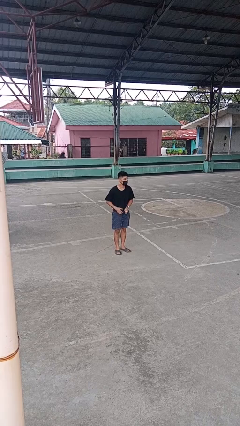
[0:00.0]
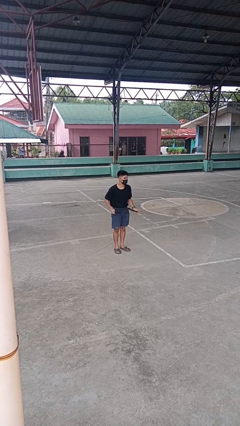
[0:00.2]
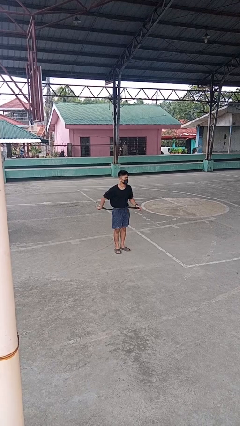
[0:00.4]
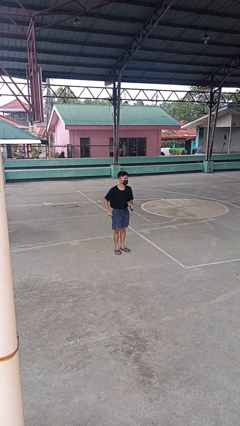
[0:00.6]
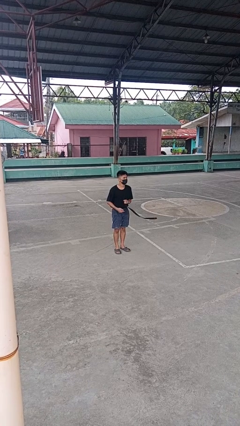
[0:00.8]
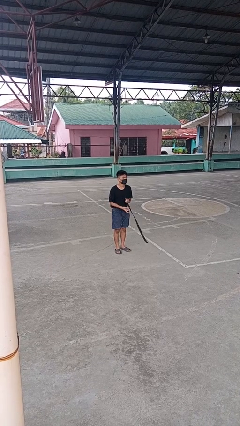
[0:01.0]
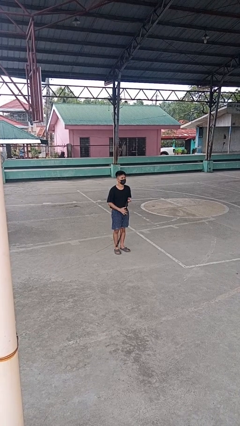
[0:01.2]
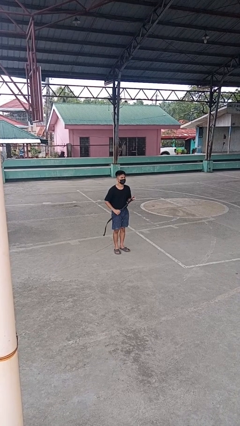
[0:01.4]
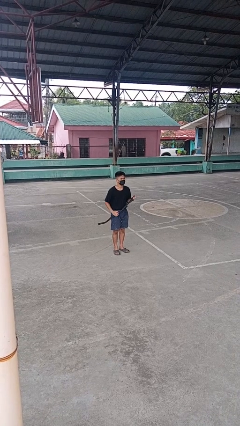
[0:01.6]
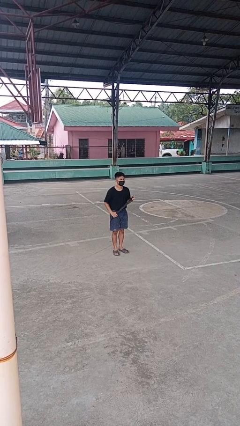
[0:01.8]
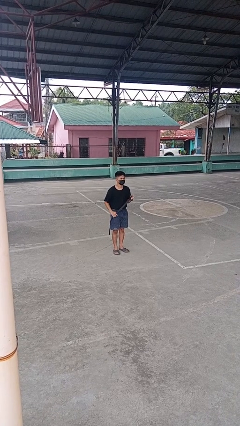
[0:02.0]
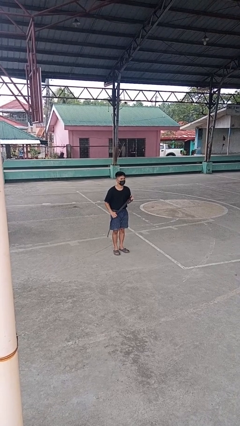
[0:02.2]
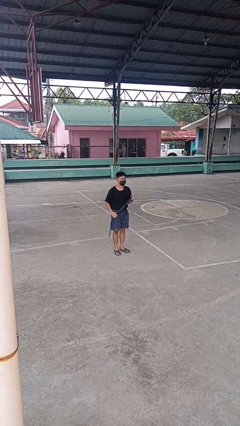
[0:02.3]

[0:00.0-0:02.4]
person takes off belt

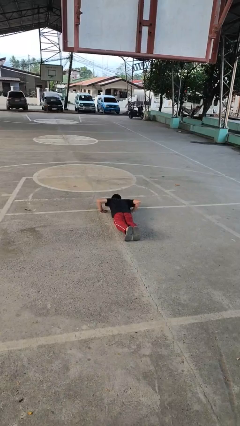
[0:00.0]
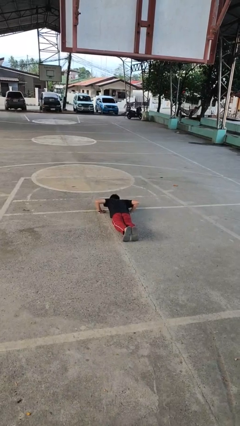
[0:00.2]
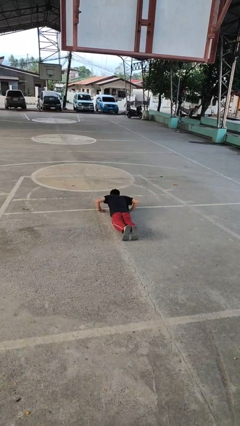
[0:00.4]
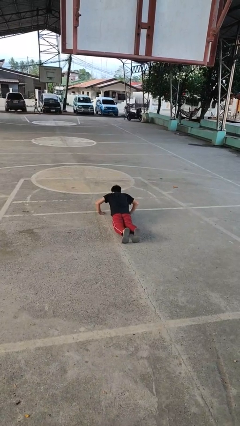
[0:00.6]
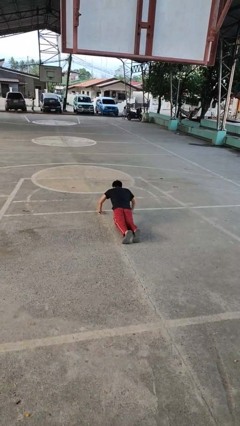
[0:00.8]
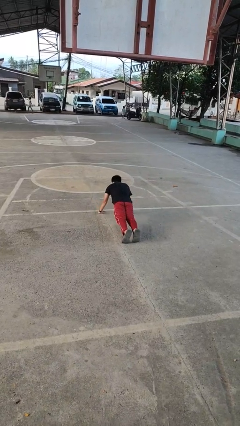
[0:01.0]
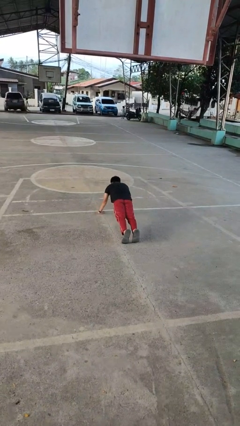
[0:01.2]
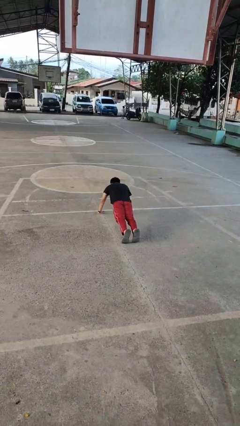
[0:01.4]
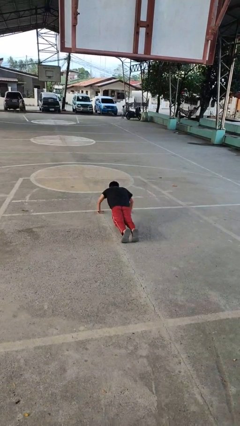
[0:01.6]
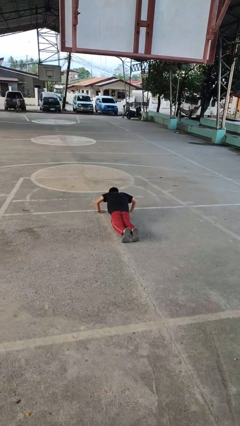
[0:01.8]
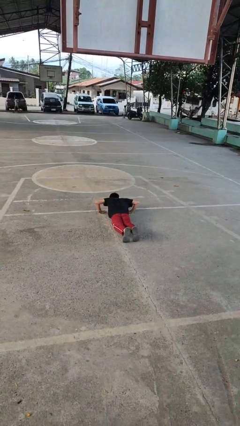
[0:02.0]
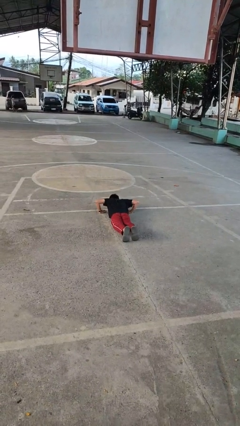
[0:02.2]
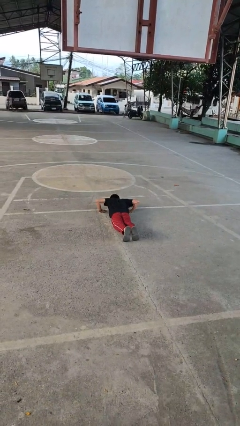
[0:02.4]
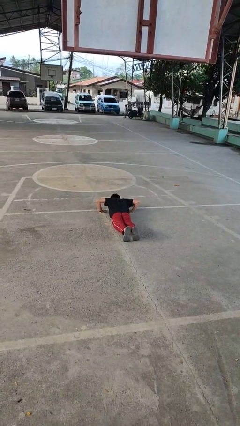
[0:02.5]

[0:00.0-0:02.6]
person exercises with pushup

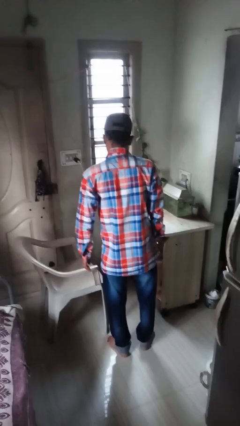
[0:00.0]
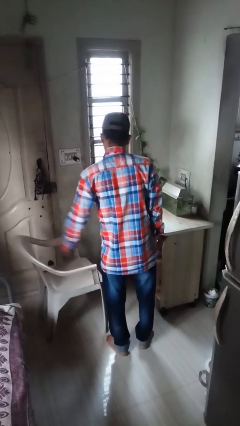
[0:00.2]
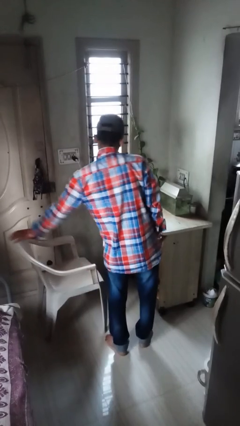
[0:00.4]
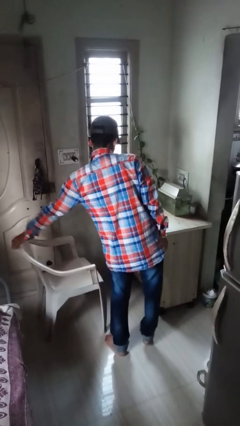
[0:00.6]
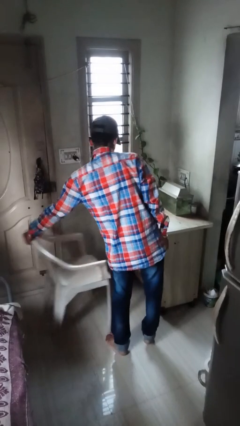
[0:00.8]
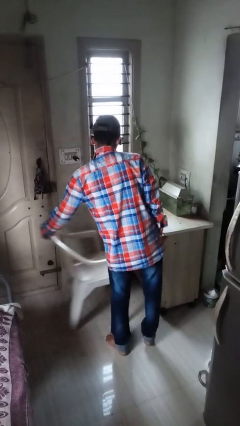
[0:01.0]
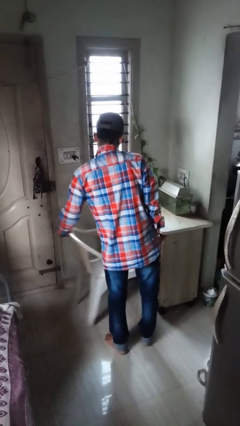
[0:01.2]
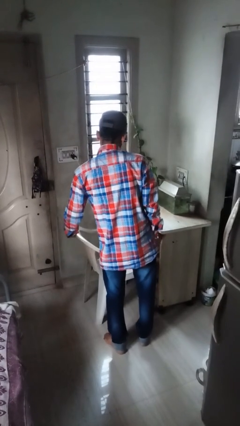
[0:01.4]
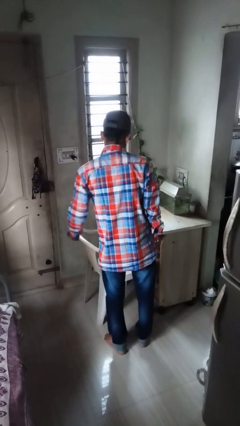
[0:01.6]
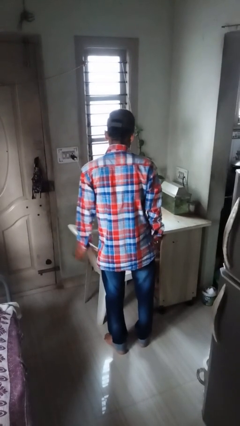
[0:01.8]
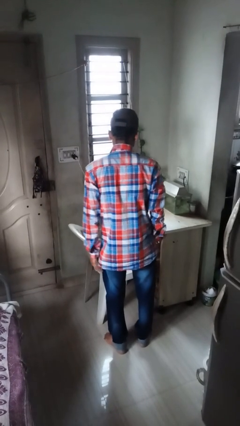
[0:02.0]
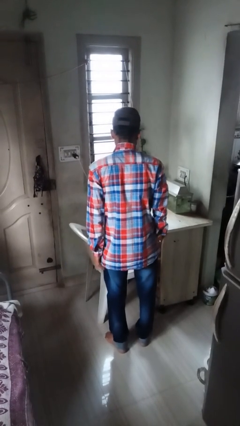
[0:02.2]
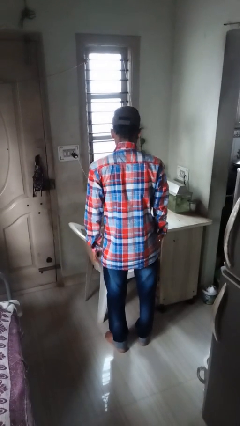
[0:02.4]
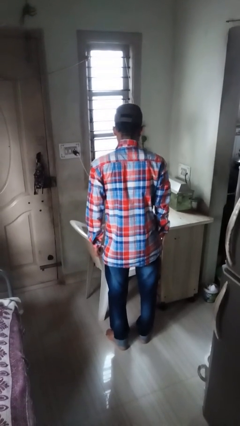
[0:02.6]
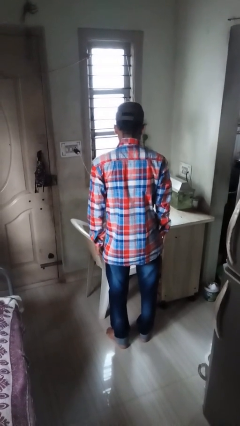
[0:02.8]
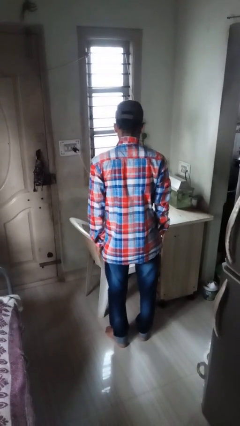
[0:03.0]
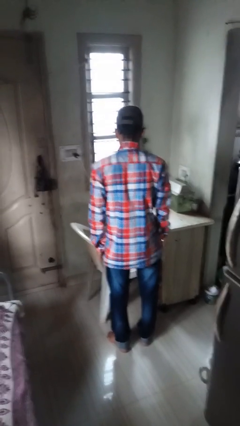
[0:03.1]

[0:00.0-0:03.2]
person pushes in chair

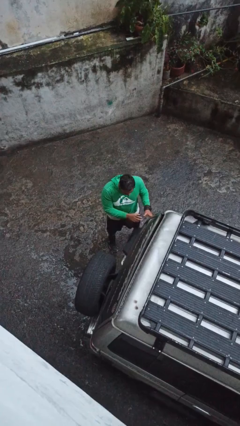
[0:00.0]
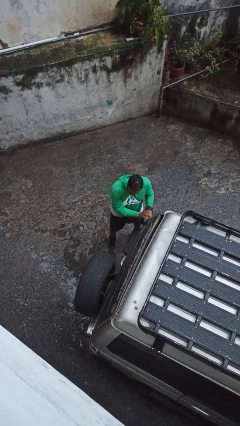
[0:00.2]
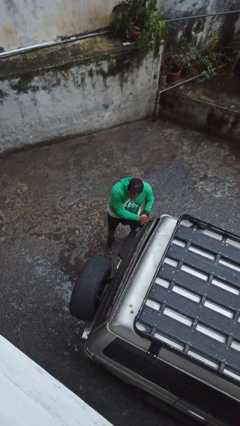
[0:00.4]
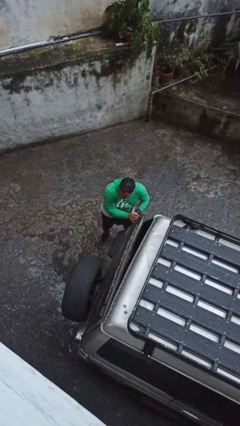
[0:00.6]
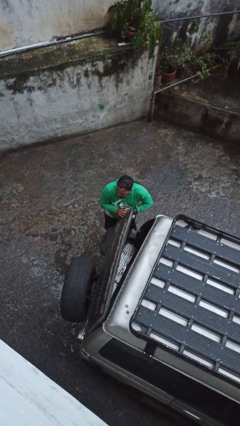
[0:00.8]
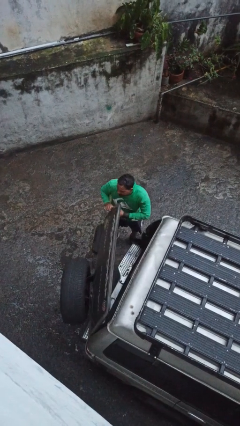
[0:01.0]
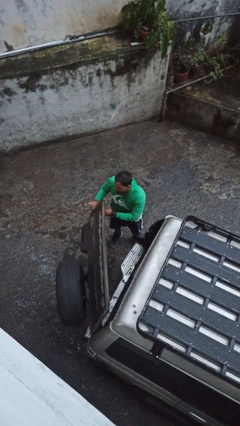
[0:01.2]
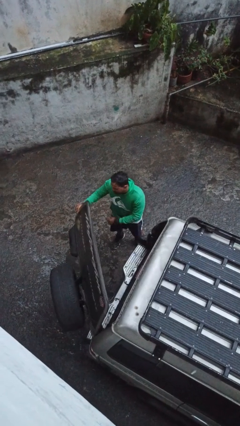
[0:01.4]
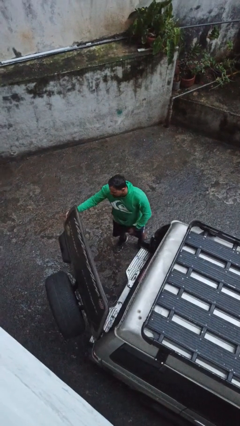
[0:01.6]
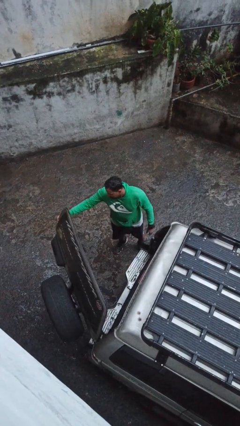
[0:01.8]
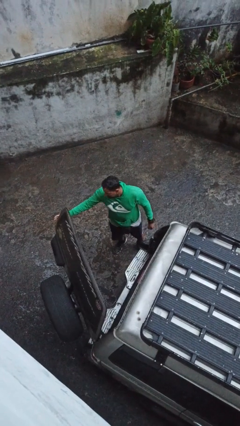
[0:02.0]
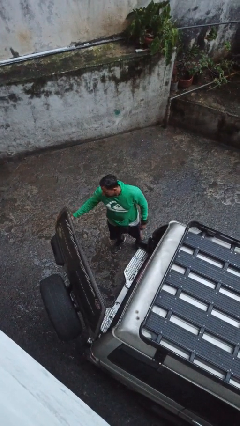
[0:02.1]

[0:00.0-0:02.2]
person opens car trunk

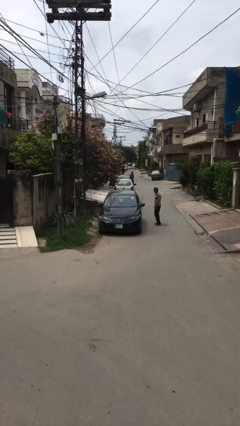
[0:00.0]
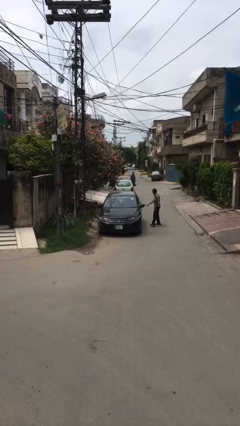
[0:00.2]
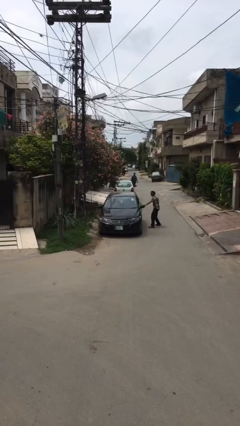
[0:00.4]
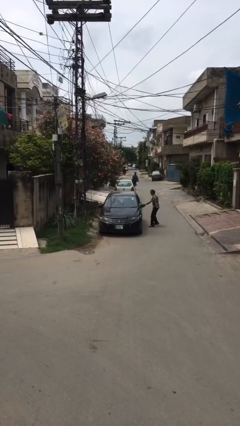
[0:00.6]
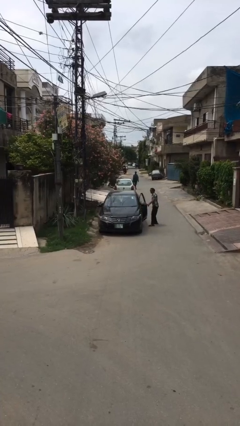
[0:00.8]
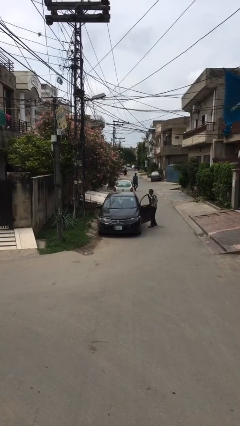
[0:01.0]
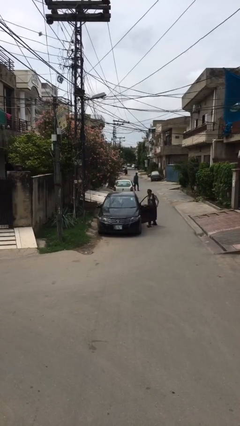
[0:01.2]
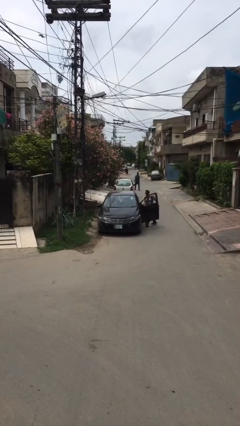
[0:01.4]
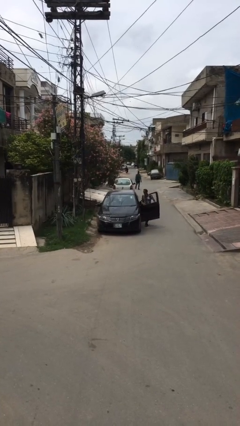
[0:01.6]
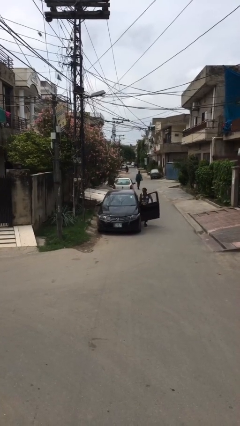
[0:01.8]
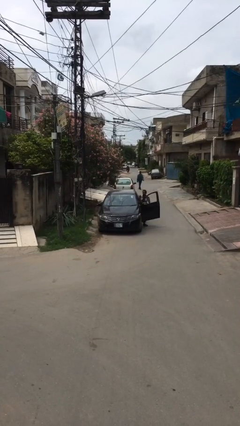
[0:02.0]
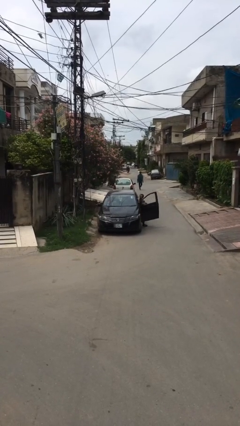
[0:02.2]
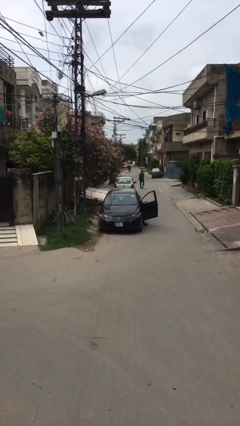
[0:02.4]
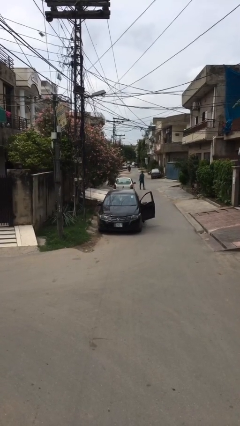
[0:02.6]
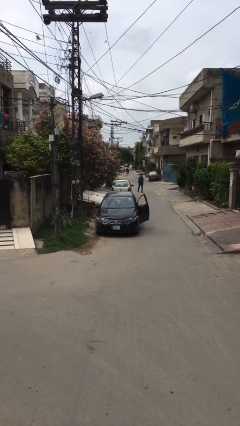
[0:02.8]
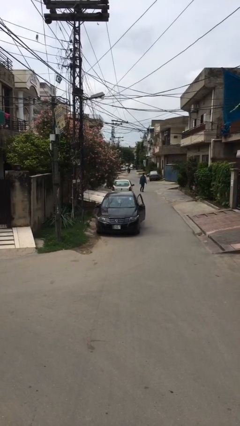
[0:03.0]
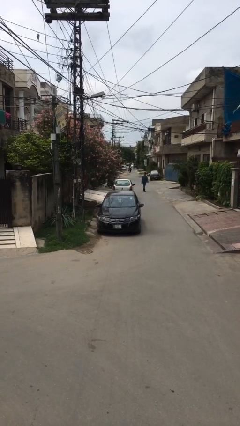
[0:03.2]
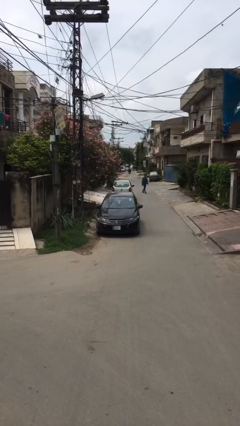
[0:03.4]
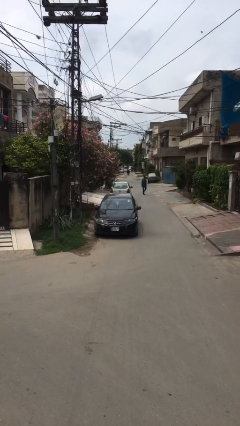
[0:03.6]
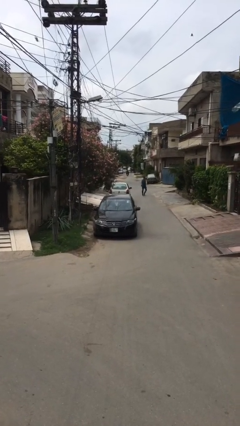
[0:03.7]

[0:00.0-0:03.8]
car picks up person

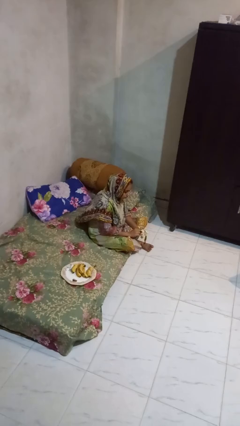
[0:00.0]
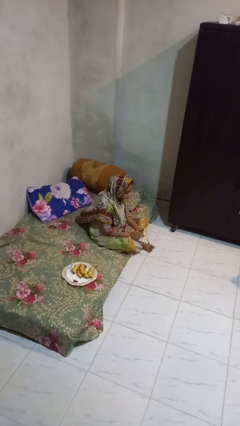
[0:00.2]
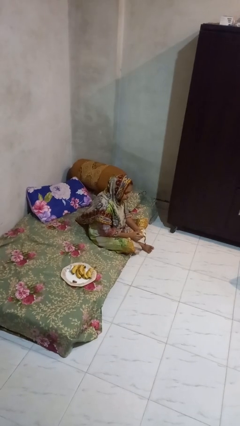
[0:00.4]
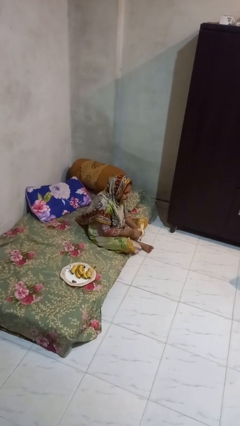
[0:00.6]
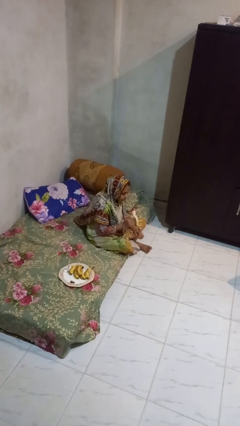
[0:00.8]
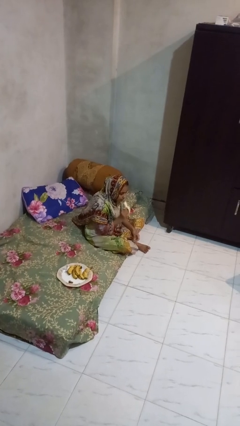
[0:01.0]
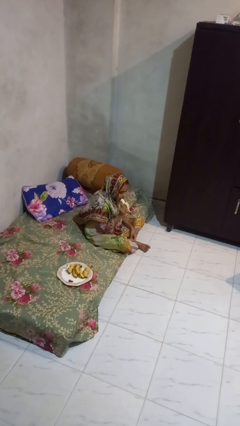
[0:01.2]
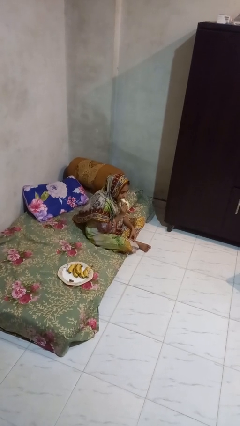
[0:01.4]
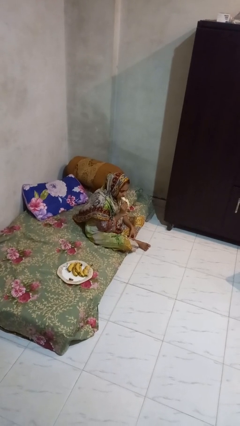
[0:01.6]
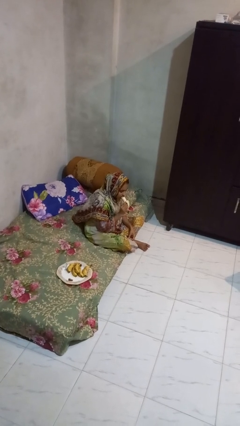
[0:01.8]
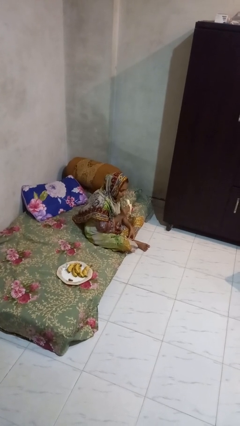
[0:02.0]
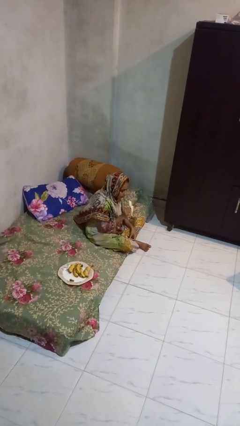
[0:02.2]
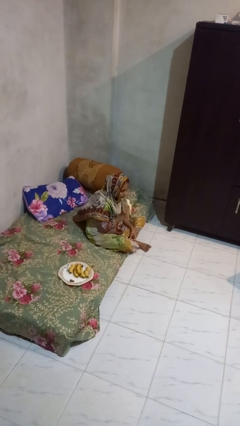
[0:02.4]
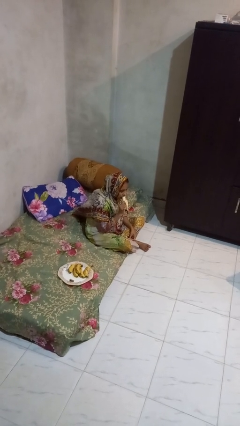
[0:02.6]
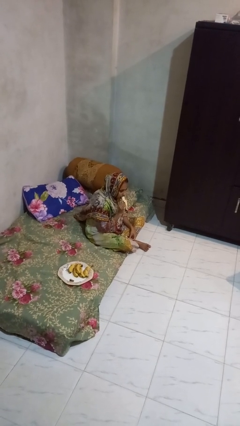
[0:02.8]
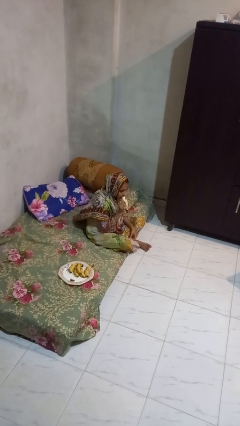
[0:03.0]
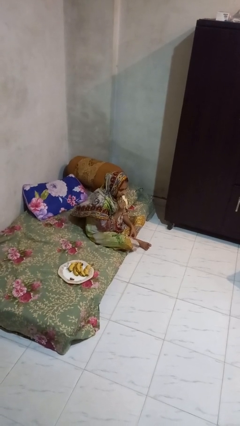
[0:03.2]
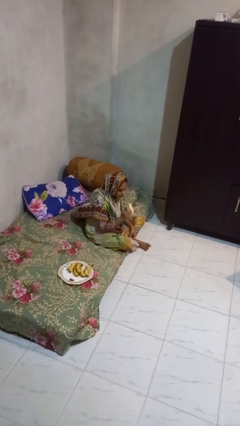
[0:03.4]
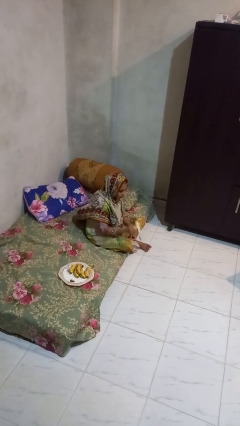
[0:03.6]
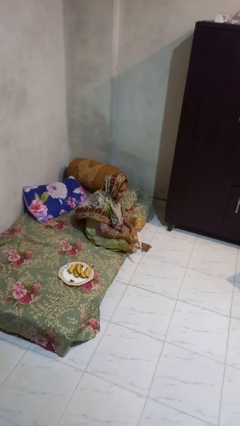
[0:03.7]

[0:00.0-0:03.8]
person eats banana
